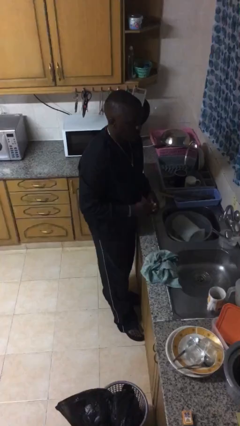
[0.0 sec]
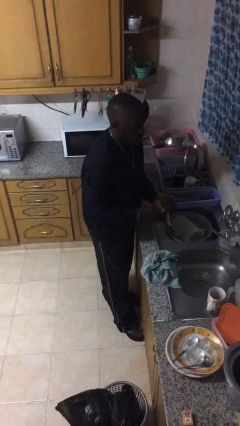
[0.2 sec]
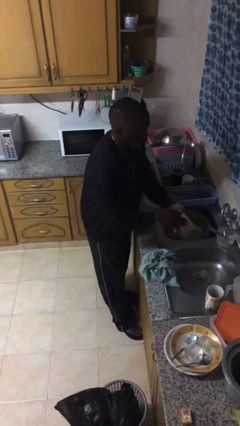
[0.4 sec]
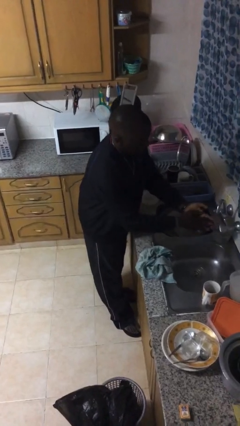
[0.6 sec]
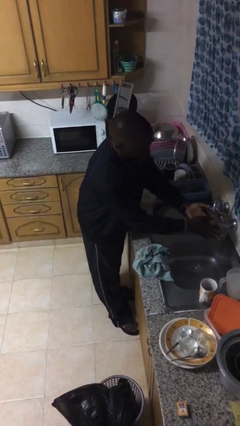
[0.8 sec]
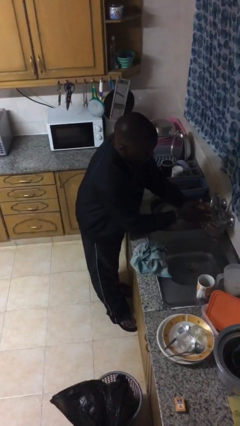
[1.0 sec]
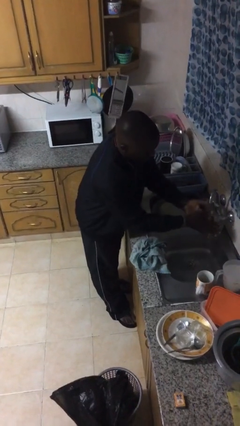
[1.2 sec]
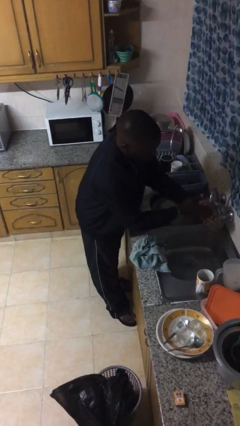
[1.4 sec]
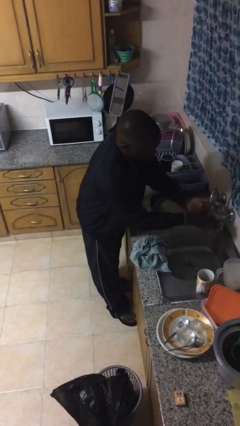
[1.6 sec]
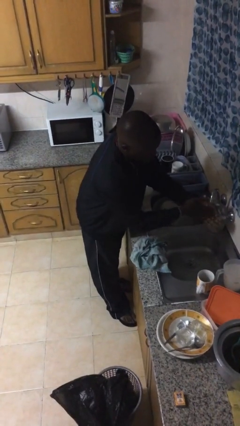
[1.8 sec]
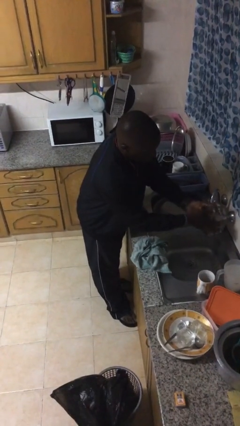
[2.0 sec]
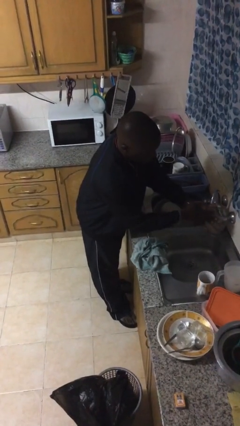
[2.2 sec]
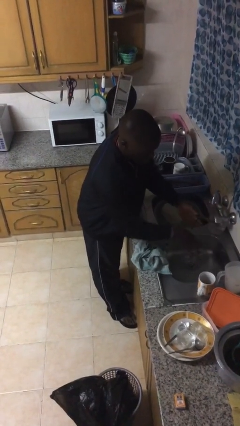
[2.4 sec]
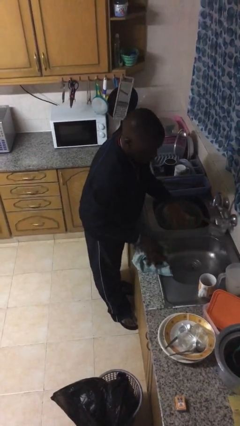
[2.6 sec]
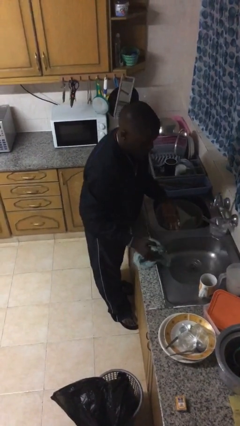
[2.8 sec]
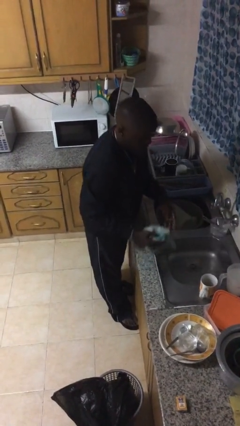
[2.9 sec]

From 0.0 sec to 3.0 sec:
person washes hands

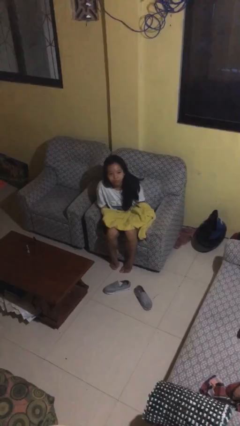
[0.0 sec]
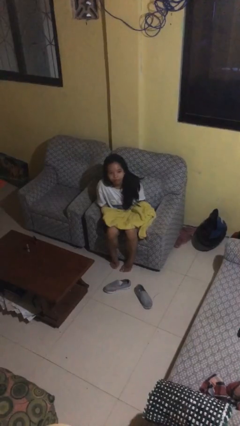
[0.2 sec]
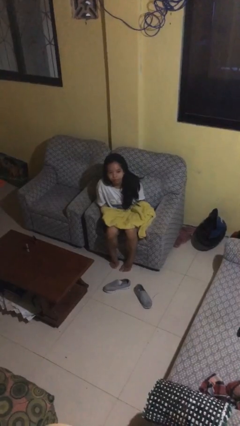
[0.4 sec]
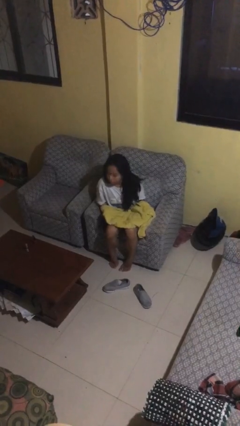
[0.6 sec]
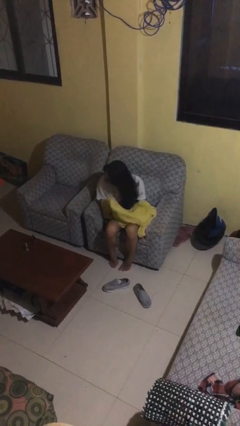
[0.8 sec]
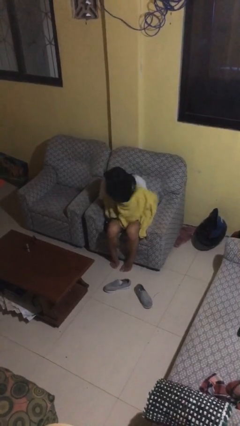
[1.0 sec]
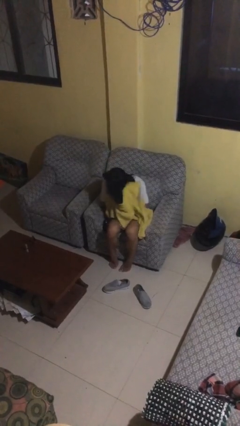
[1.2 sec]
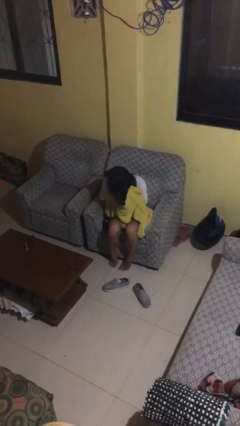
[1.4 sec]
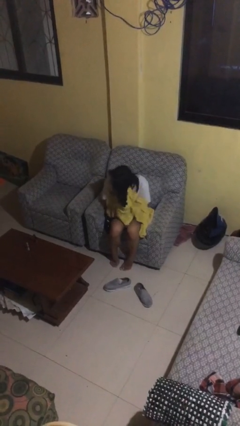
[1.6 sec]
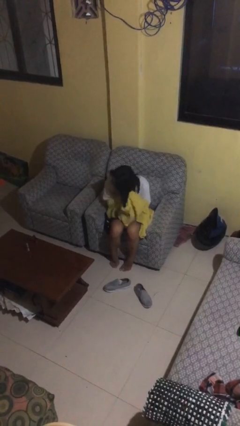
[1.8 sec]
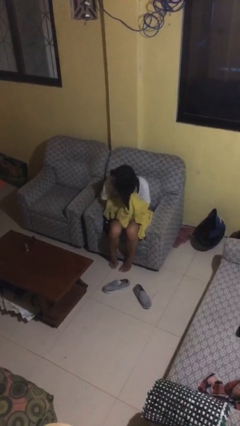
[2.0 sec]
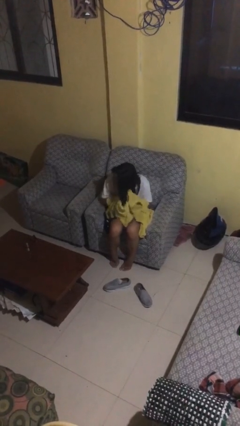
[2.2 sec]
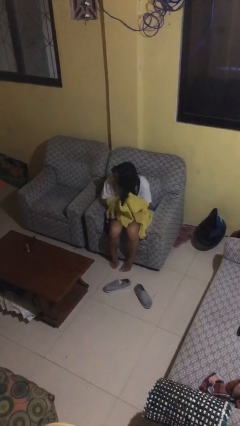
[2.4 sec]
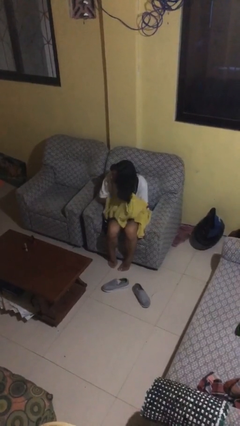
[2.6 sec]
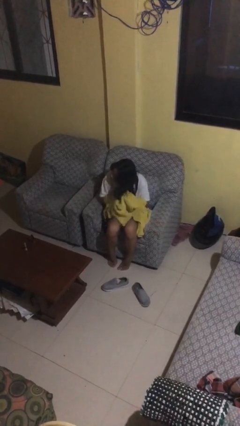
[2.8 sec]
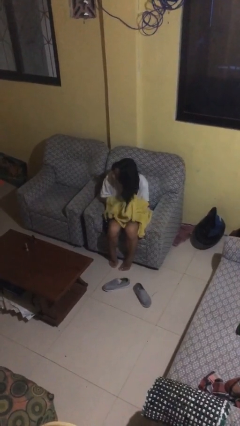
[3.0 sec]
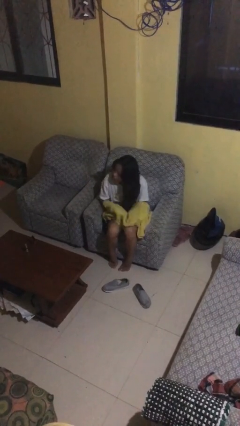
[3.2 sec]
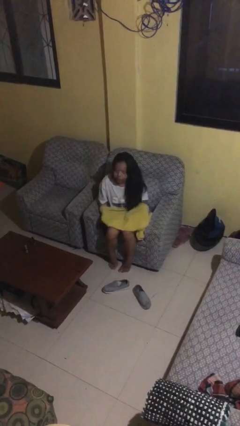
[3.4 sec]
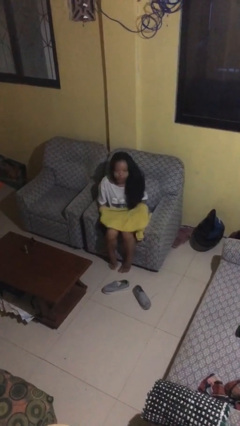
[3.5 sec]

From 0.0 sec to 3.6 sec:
person dries hair with towel

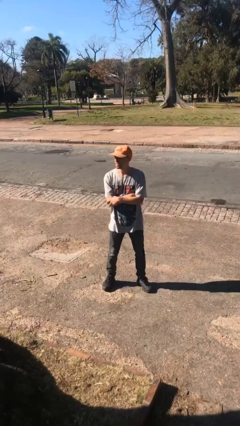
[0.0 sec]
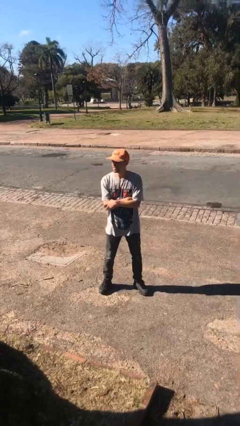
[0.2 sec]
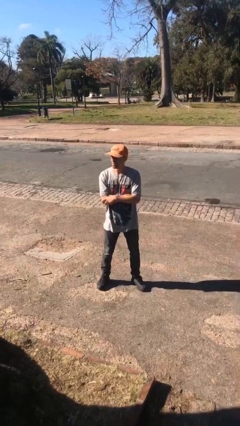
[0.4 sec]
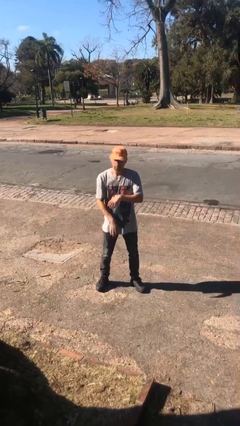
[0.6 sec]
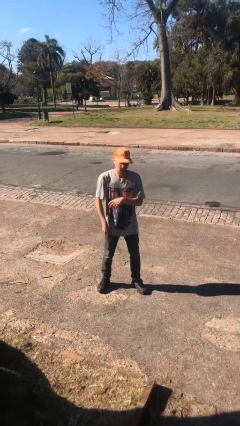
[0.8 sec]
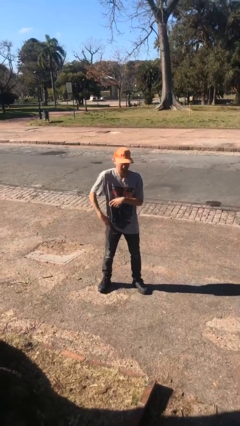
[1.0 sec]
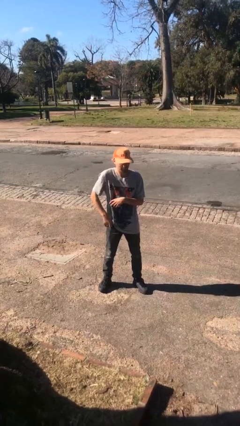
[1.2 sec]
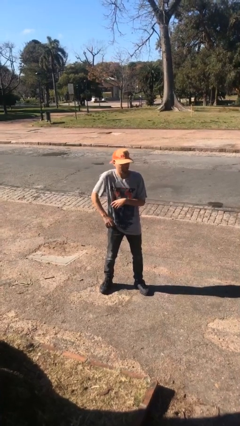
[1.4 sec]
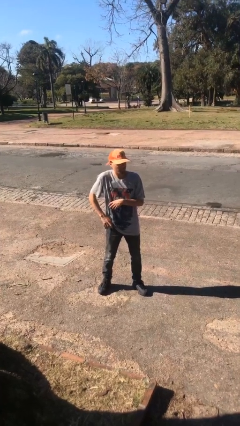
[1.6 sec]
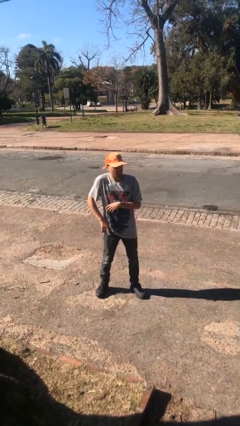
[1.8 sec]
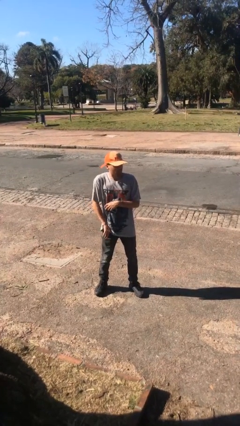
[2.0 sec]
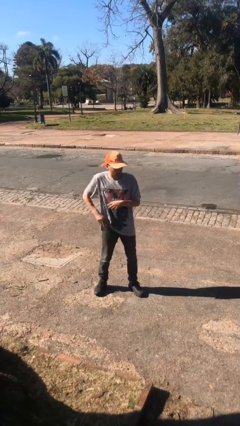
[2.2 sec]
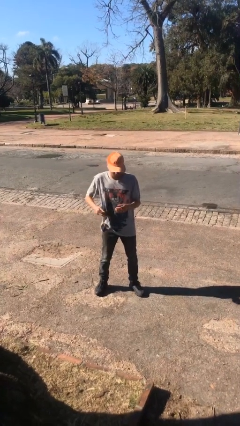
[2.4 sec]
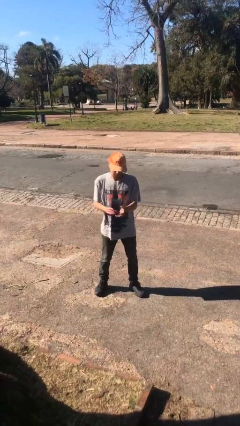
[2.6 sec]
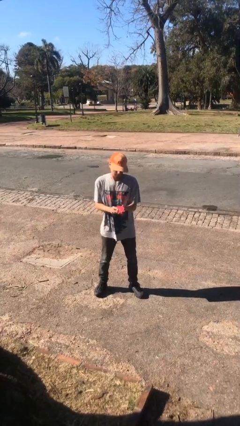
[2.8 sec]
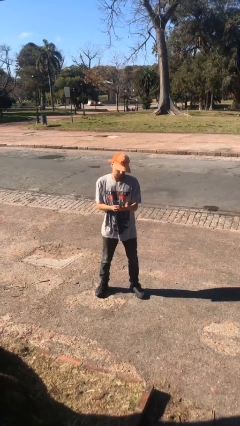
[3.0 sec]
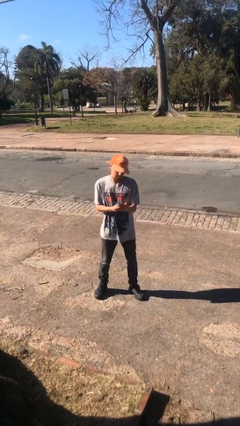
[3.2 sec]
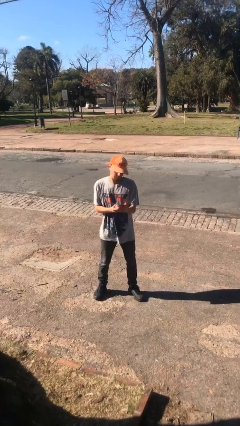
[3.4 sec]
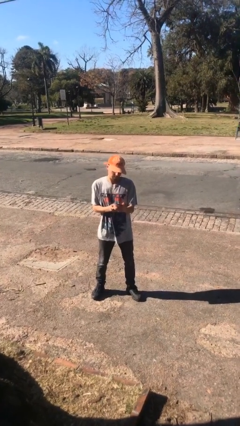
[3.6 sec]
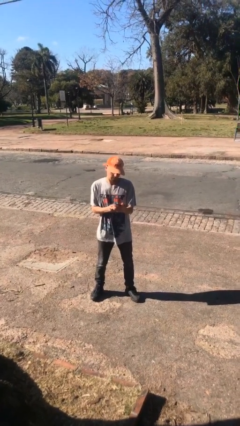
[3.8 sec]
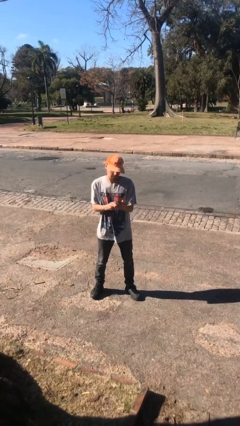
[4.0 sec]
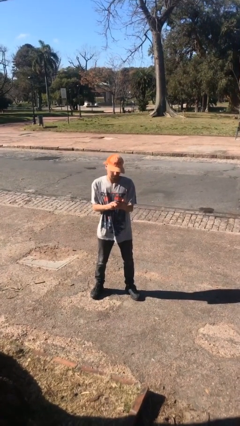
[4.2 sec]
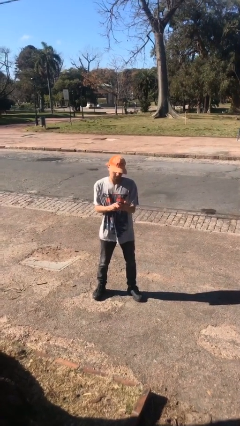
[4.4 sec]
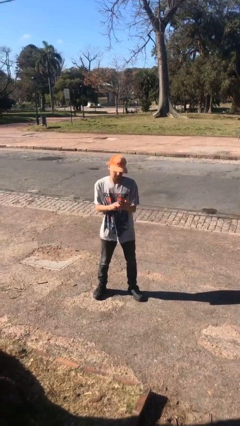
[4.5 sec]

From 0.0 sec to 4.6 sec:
person takes phone from pocket

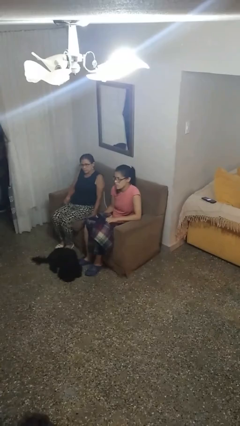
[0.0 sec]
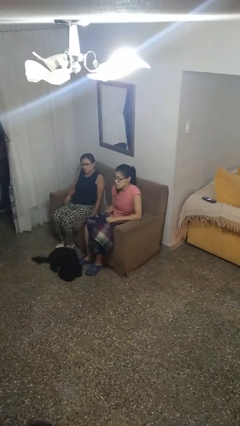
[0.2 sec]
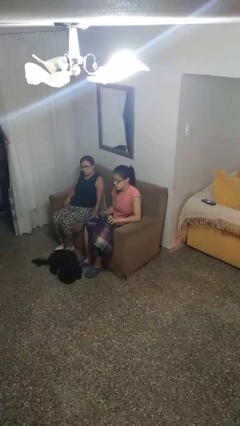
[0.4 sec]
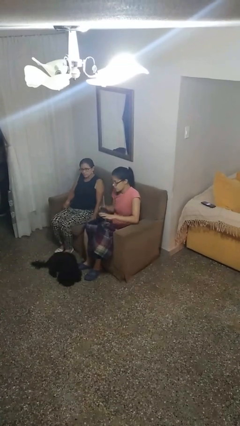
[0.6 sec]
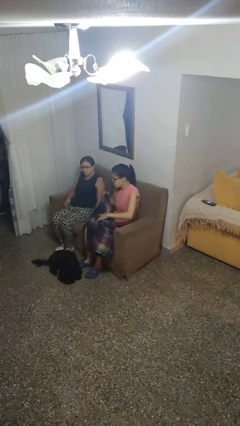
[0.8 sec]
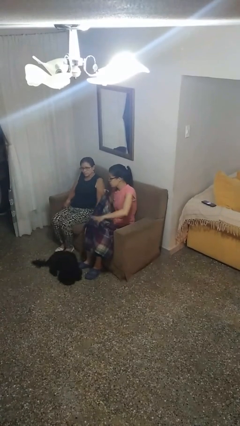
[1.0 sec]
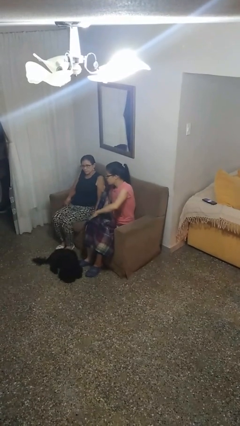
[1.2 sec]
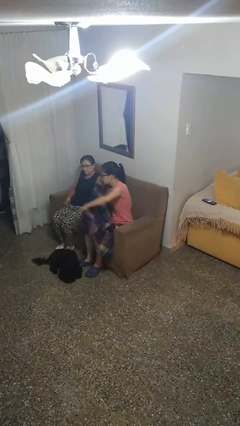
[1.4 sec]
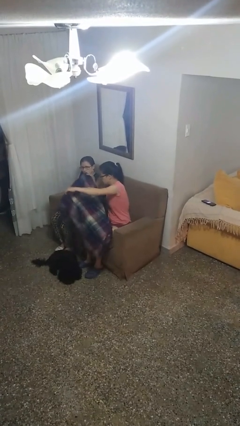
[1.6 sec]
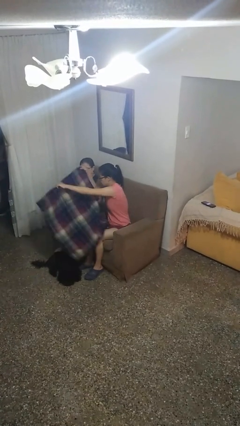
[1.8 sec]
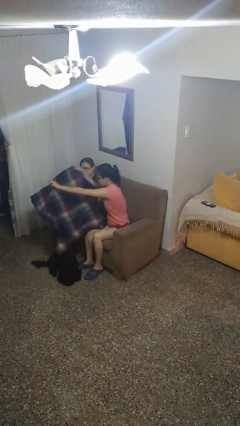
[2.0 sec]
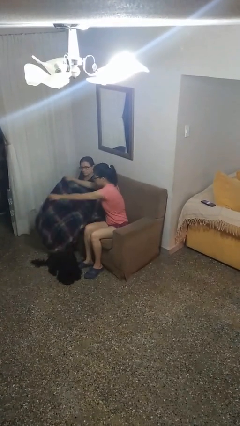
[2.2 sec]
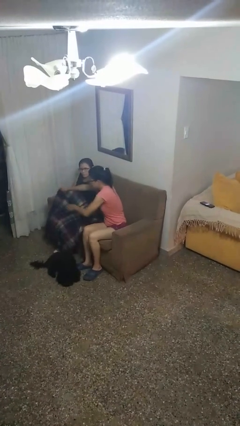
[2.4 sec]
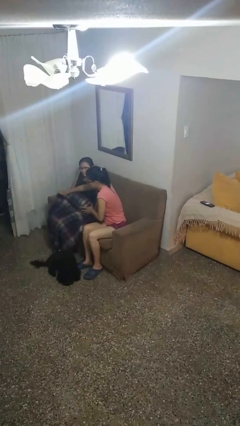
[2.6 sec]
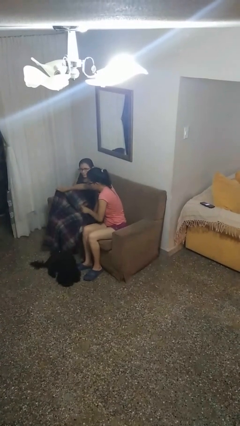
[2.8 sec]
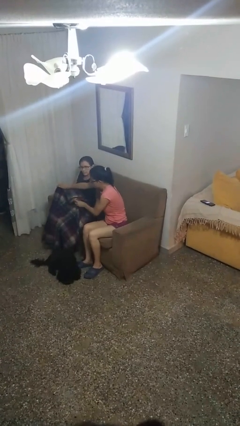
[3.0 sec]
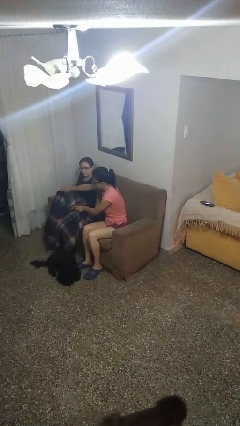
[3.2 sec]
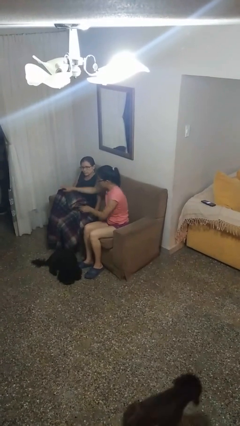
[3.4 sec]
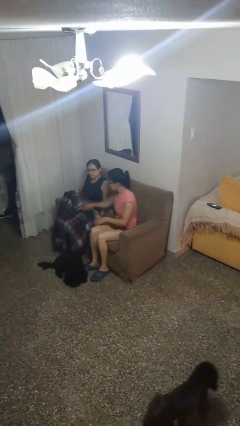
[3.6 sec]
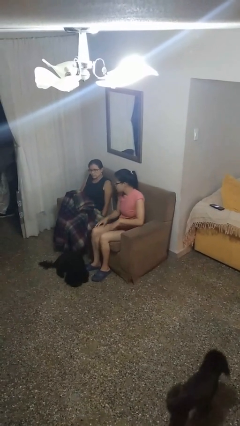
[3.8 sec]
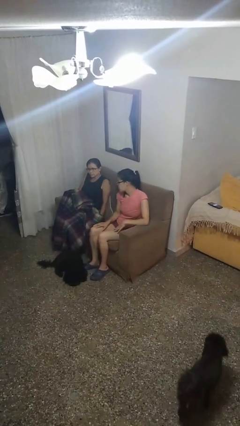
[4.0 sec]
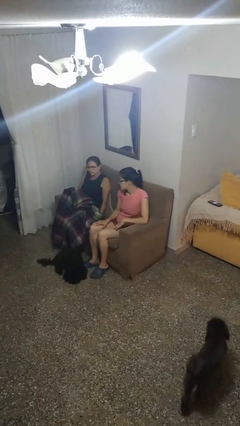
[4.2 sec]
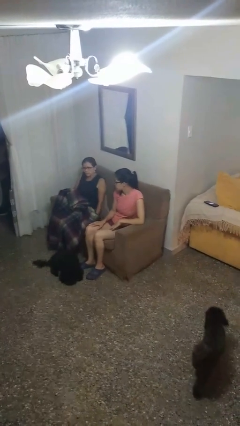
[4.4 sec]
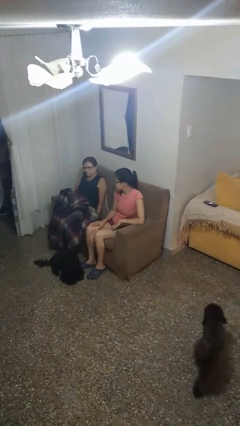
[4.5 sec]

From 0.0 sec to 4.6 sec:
person covers friend with blanket

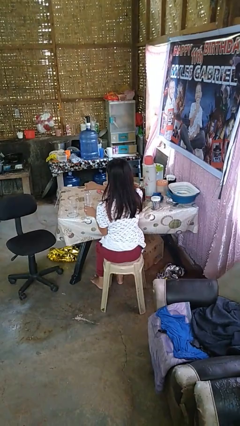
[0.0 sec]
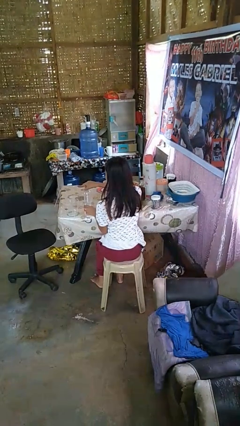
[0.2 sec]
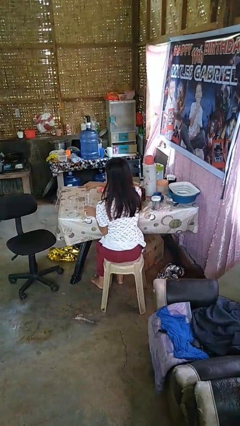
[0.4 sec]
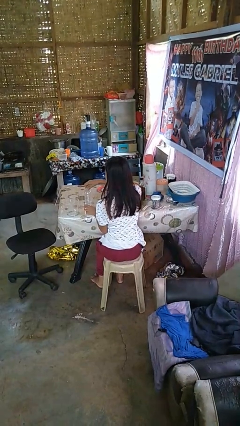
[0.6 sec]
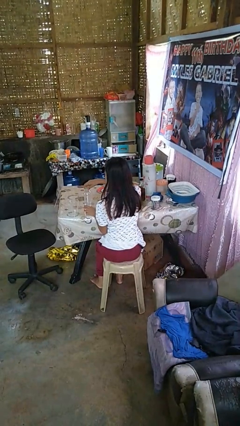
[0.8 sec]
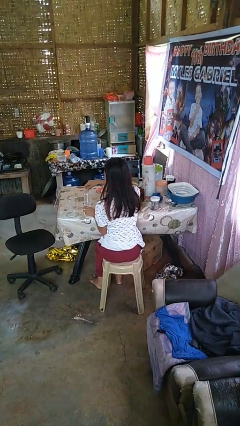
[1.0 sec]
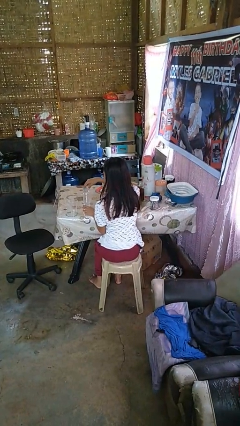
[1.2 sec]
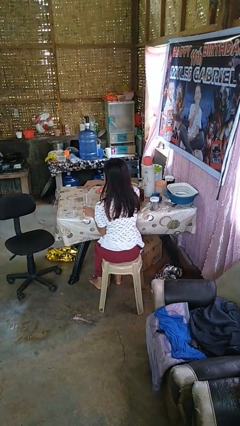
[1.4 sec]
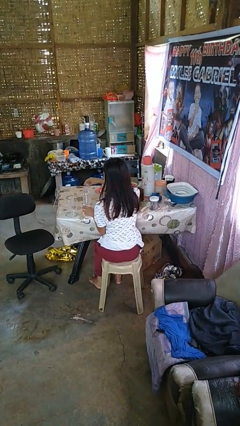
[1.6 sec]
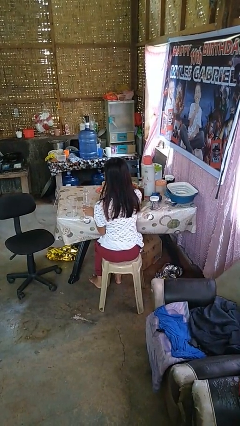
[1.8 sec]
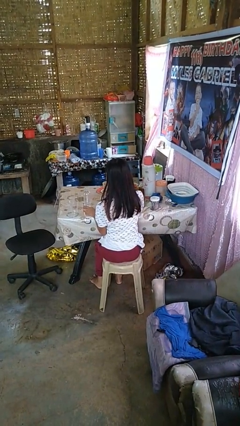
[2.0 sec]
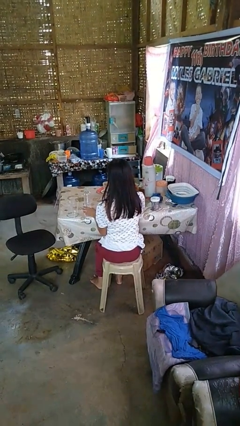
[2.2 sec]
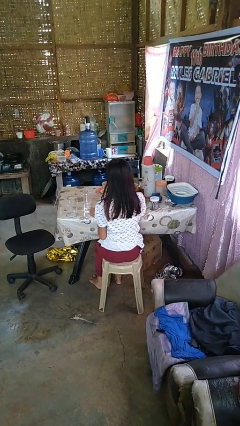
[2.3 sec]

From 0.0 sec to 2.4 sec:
person unscrews lid from bottle
